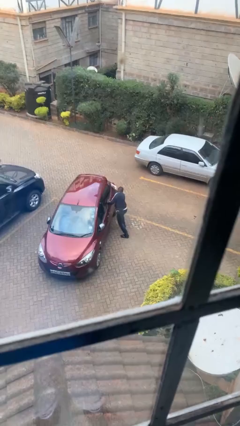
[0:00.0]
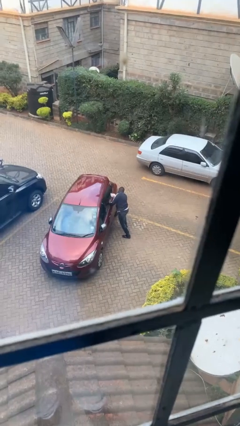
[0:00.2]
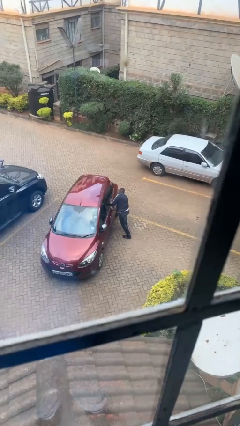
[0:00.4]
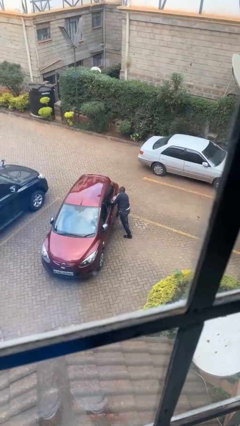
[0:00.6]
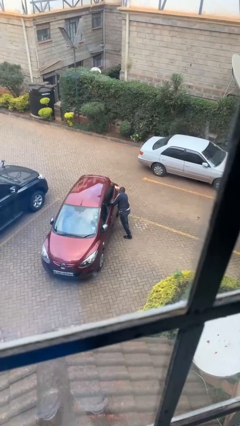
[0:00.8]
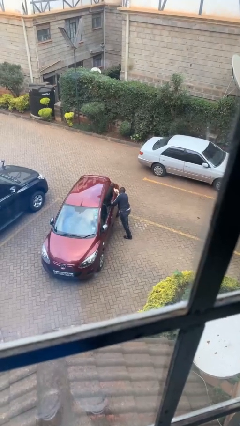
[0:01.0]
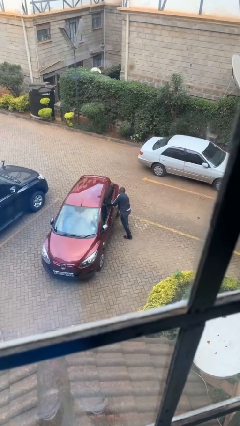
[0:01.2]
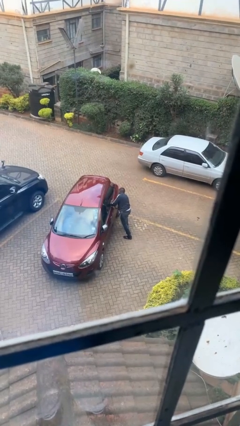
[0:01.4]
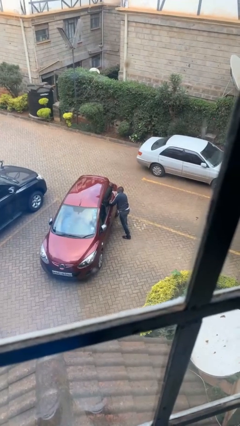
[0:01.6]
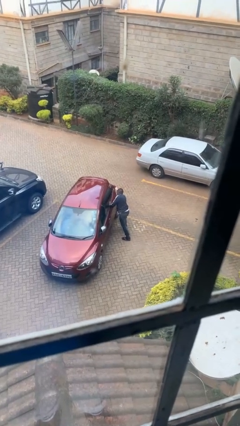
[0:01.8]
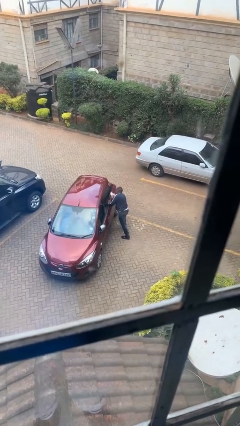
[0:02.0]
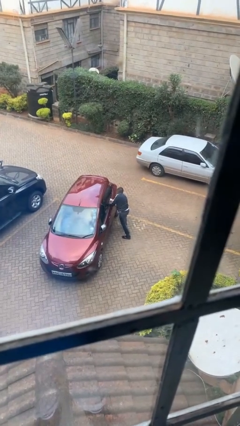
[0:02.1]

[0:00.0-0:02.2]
person polishes car with rag

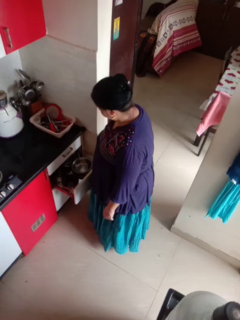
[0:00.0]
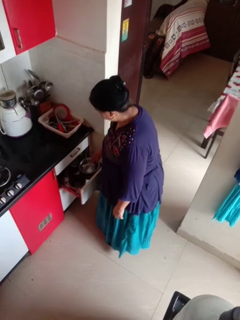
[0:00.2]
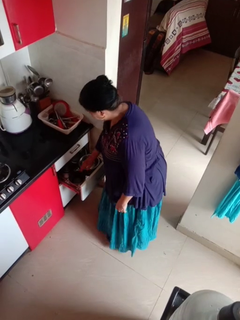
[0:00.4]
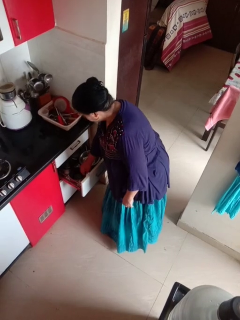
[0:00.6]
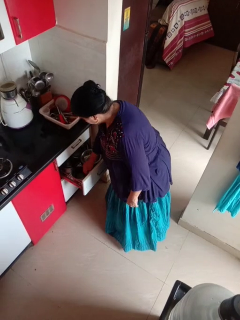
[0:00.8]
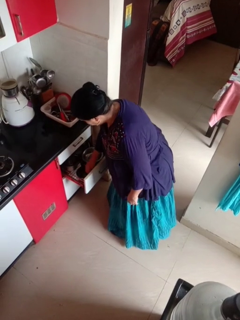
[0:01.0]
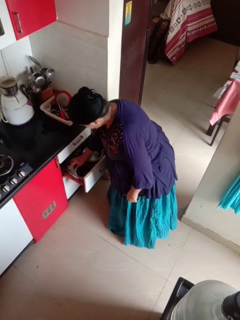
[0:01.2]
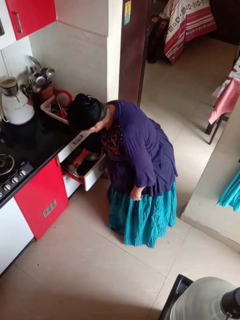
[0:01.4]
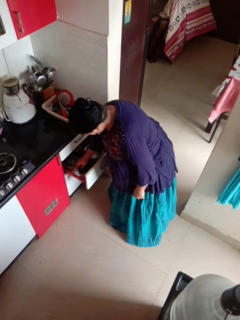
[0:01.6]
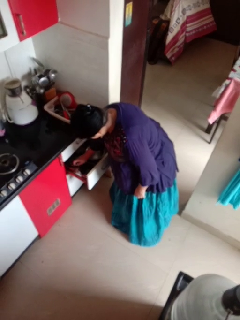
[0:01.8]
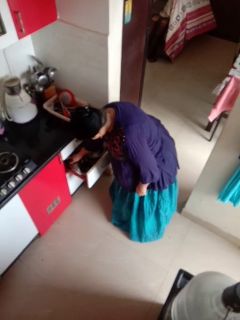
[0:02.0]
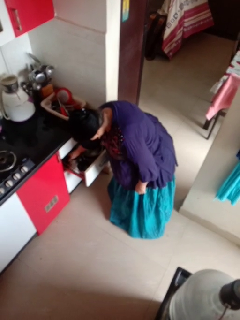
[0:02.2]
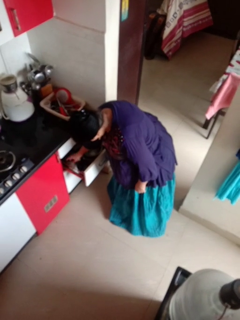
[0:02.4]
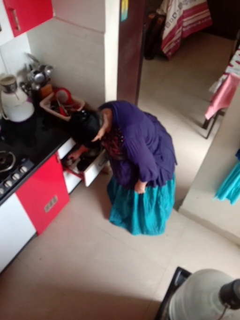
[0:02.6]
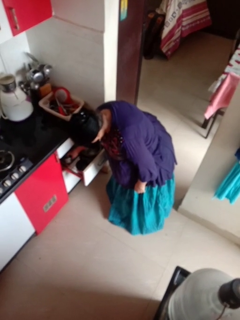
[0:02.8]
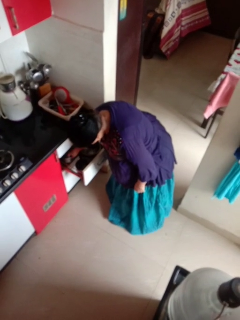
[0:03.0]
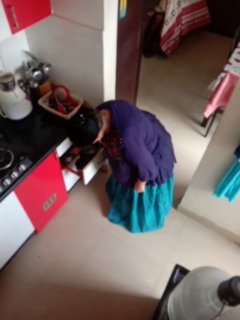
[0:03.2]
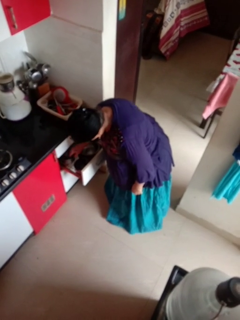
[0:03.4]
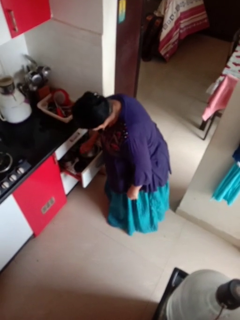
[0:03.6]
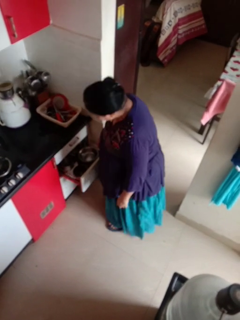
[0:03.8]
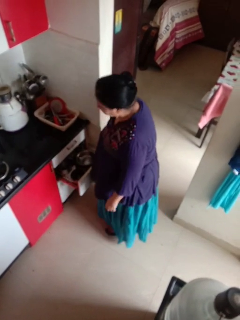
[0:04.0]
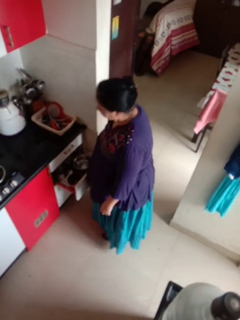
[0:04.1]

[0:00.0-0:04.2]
person searches in kitchen drawer

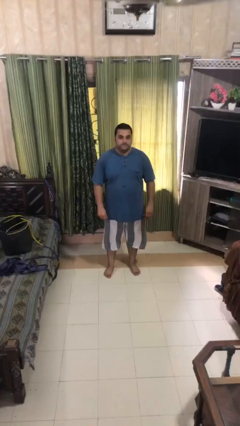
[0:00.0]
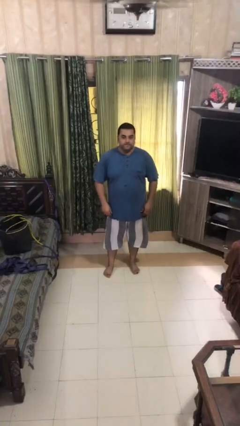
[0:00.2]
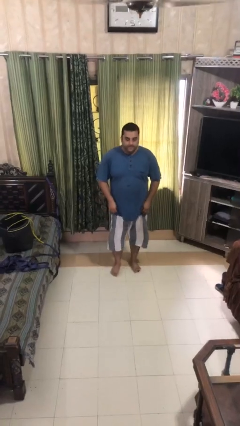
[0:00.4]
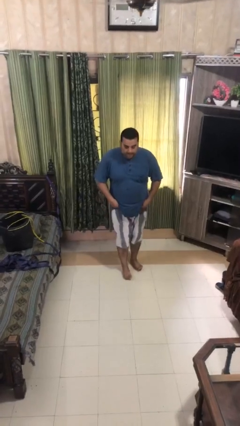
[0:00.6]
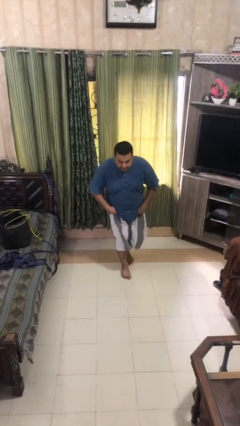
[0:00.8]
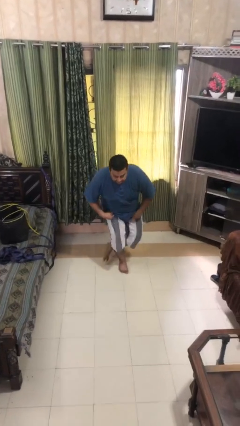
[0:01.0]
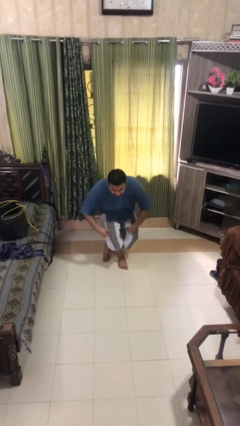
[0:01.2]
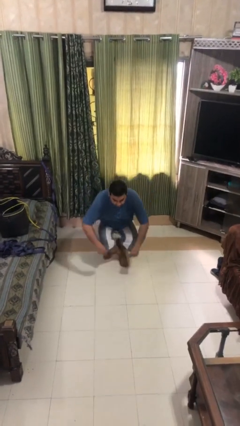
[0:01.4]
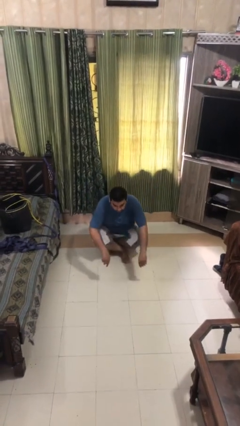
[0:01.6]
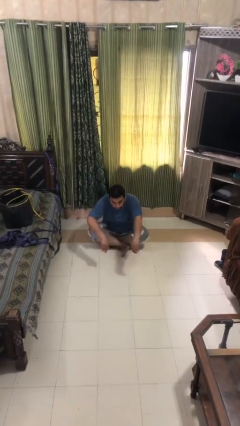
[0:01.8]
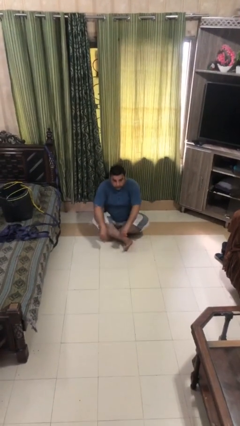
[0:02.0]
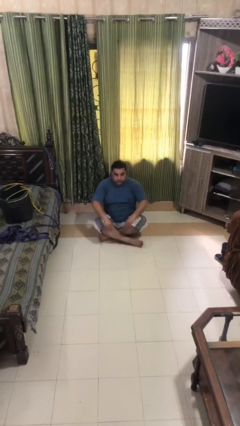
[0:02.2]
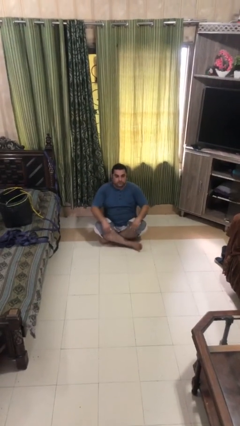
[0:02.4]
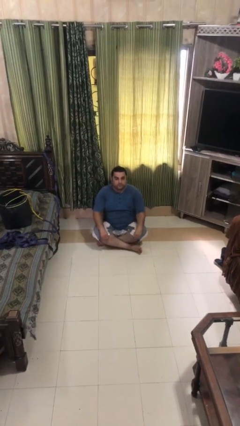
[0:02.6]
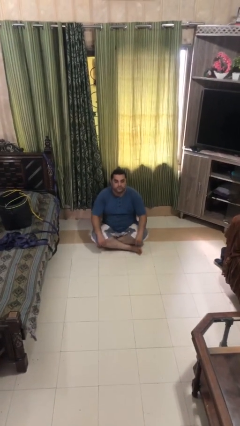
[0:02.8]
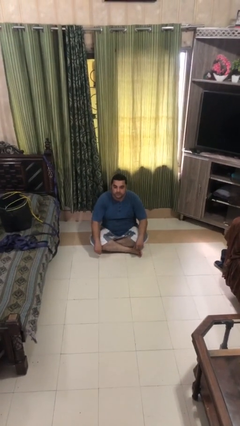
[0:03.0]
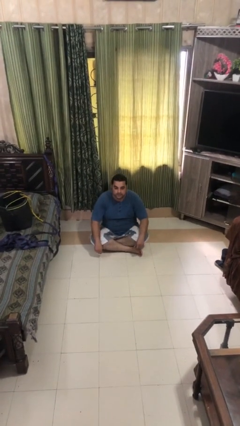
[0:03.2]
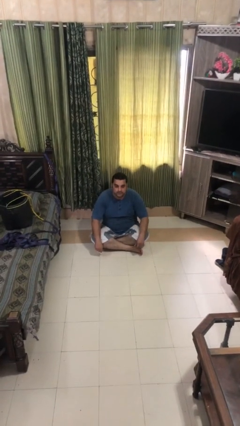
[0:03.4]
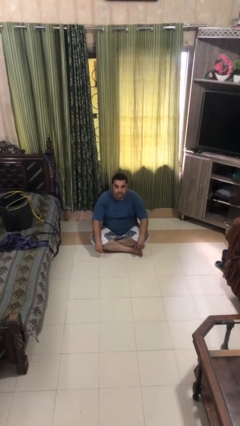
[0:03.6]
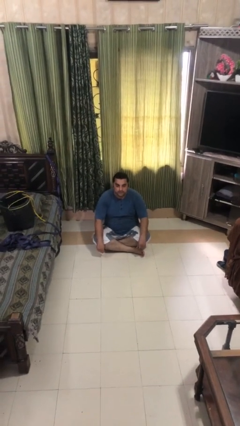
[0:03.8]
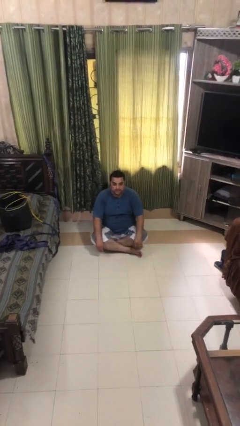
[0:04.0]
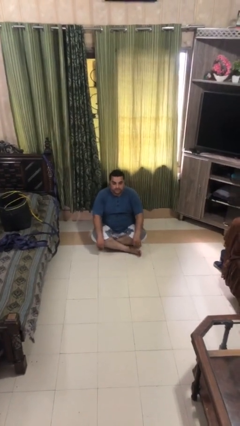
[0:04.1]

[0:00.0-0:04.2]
person sits crisscross

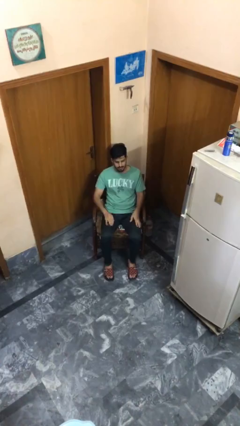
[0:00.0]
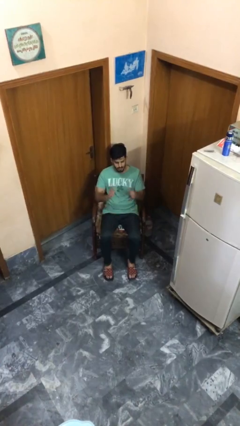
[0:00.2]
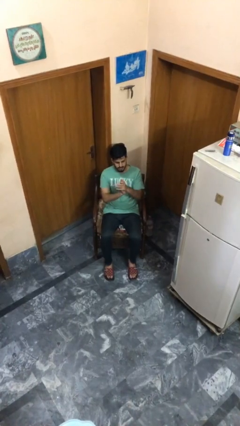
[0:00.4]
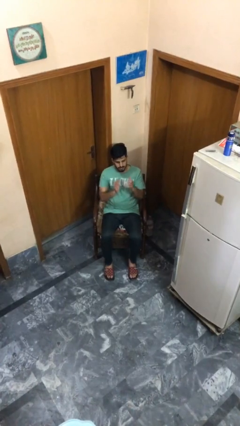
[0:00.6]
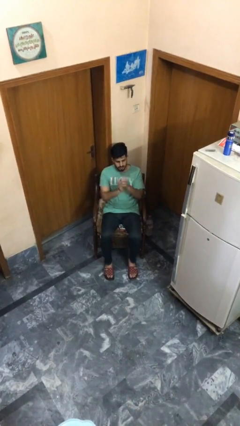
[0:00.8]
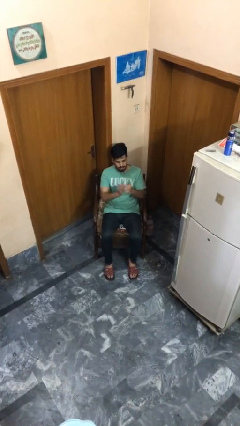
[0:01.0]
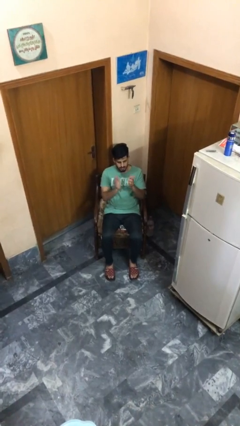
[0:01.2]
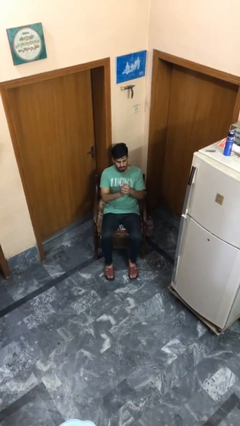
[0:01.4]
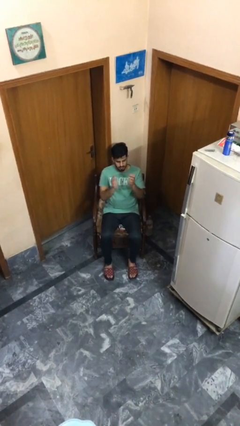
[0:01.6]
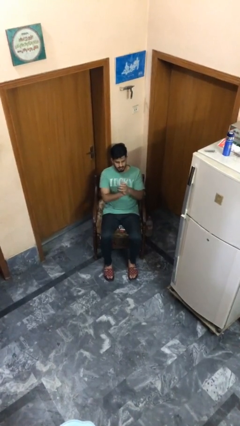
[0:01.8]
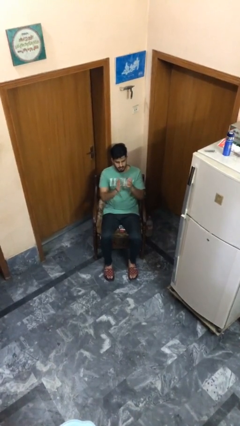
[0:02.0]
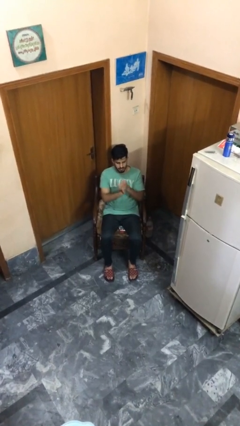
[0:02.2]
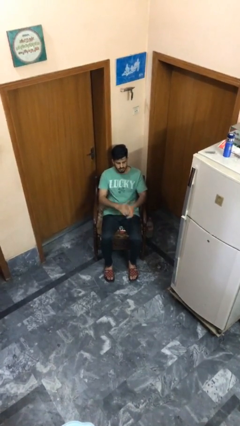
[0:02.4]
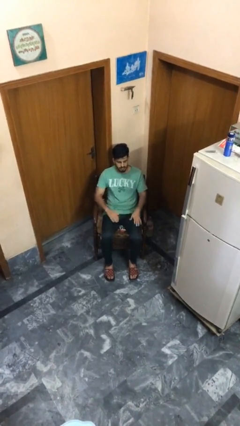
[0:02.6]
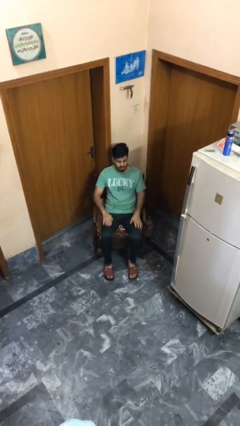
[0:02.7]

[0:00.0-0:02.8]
person claps hands

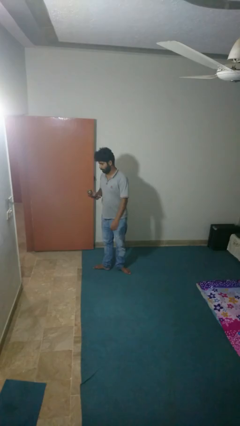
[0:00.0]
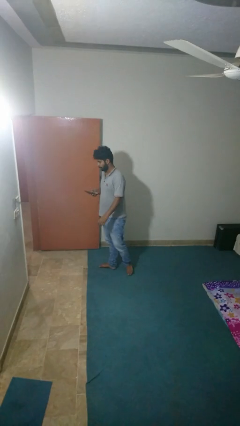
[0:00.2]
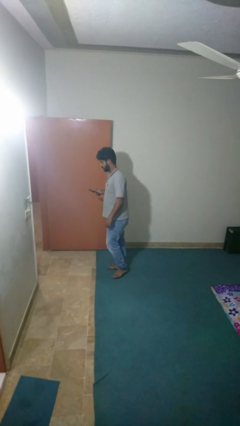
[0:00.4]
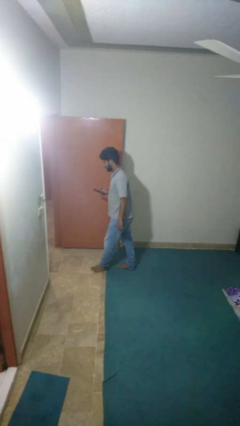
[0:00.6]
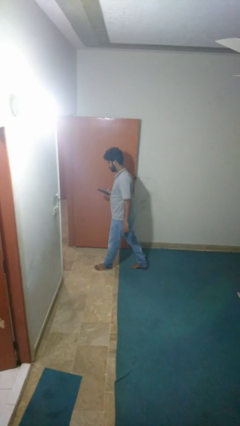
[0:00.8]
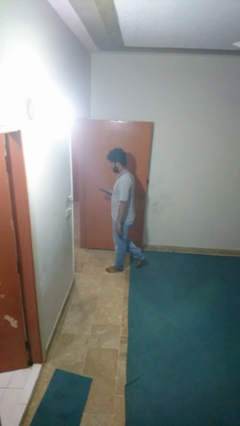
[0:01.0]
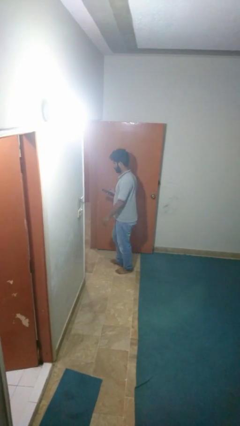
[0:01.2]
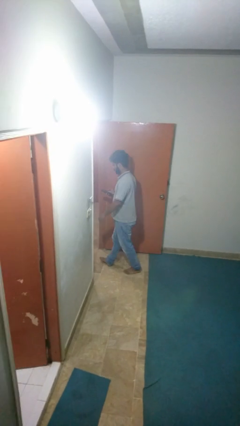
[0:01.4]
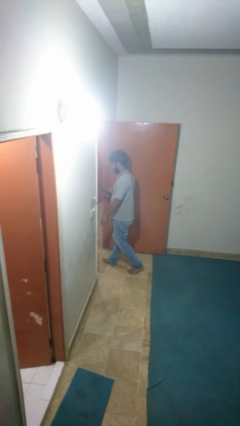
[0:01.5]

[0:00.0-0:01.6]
person exits scene through structure

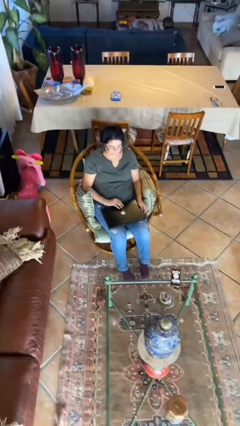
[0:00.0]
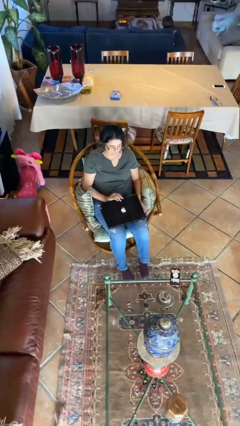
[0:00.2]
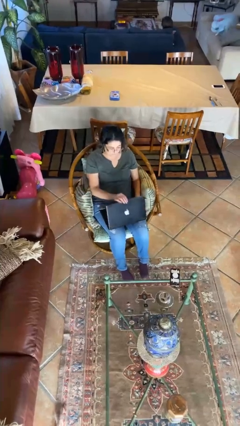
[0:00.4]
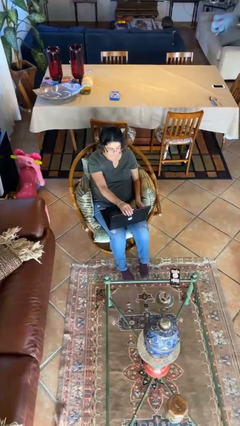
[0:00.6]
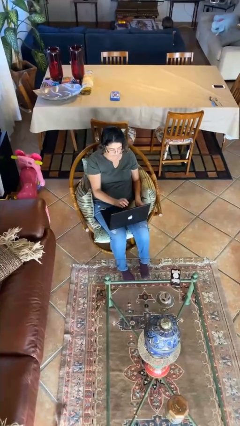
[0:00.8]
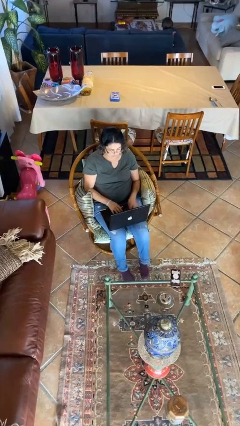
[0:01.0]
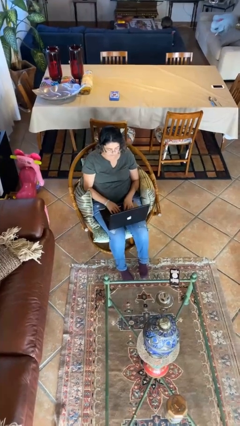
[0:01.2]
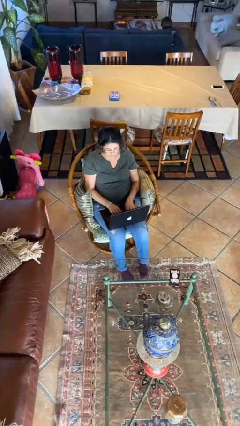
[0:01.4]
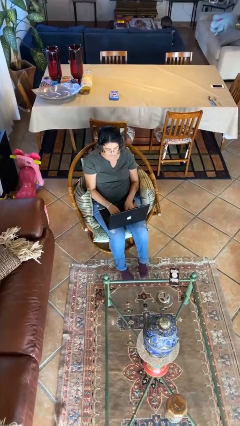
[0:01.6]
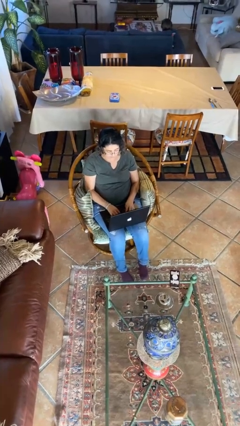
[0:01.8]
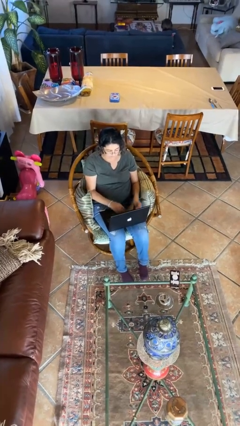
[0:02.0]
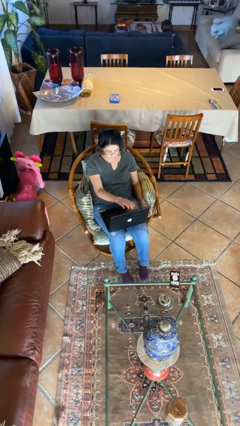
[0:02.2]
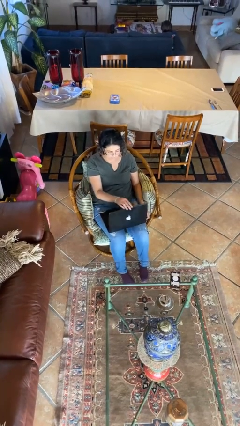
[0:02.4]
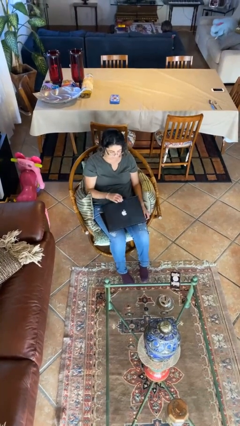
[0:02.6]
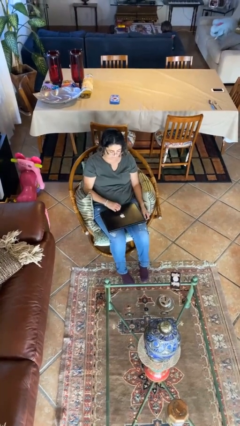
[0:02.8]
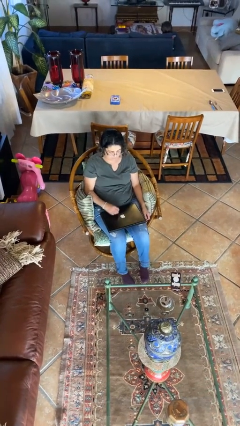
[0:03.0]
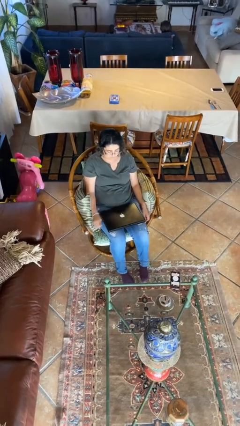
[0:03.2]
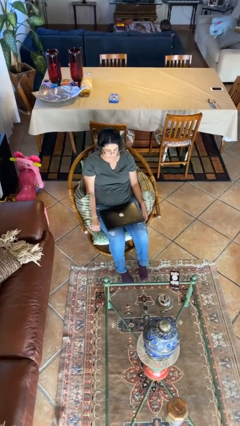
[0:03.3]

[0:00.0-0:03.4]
person interacts with laptop
